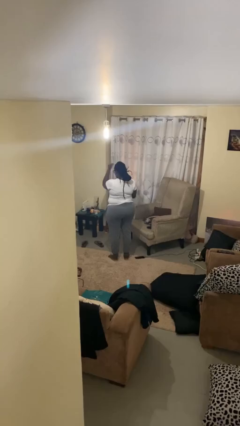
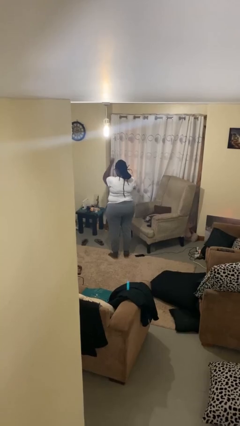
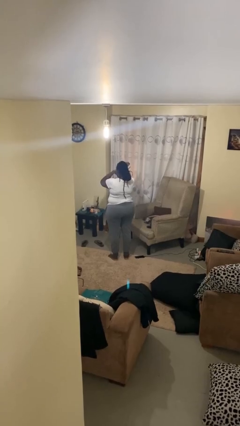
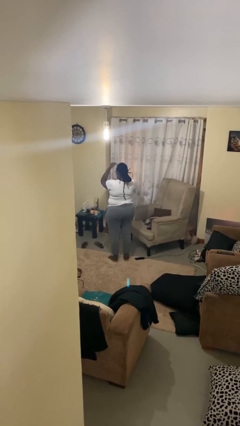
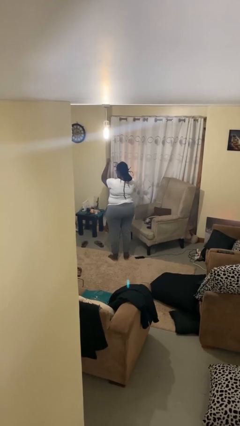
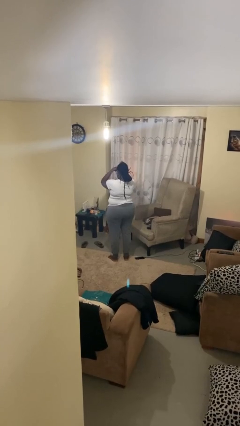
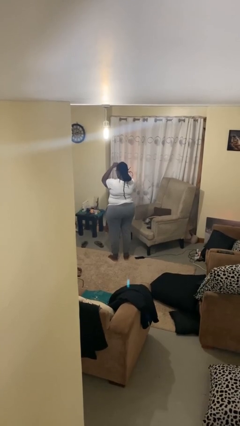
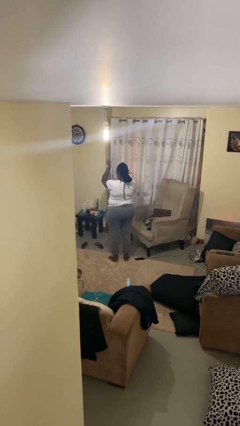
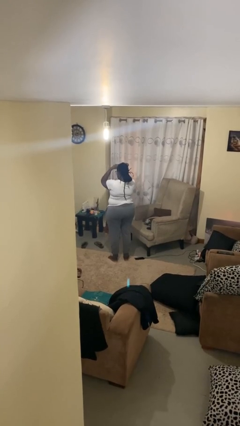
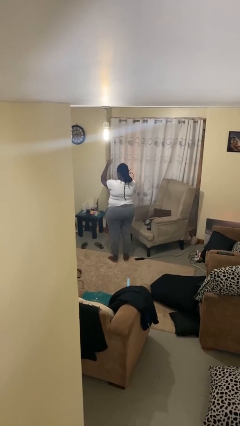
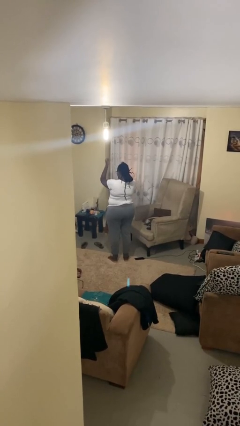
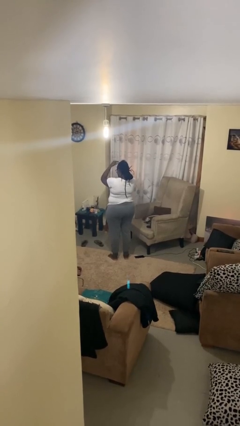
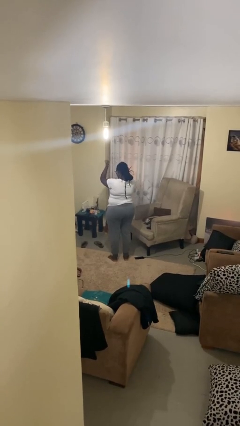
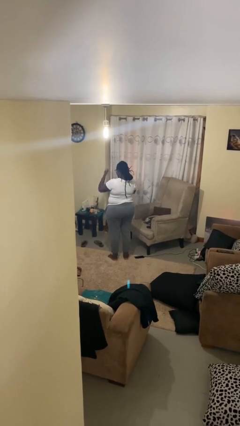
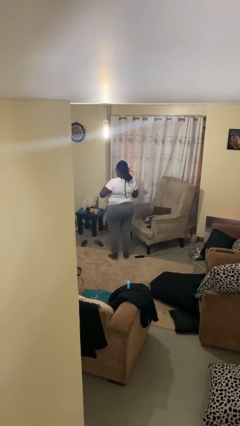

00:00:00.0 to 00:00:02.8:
person snaps fingers

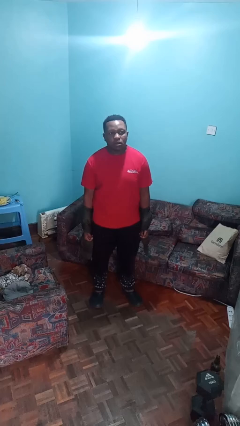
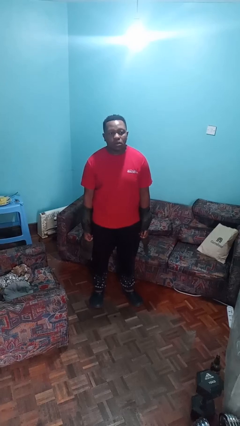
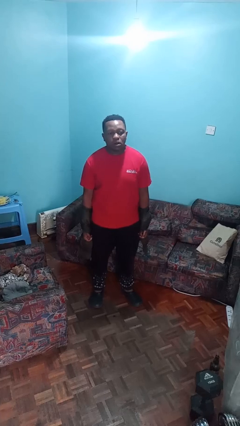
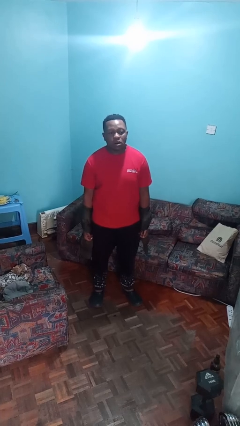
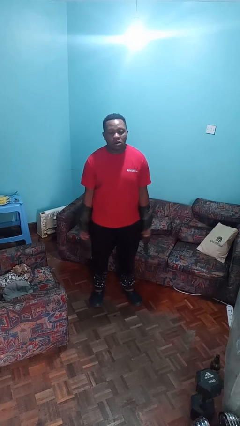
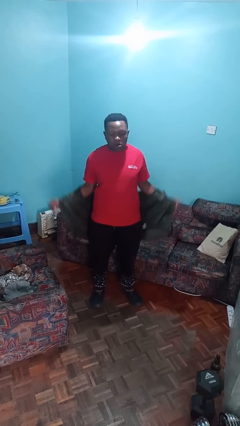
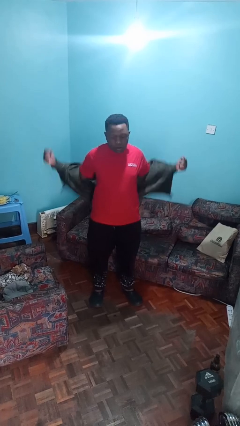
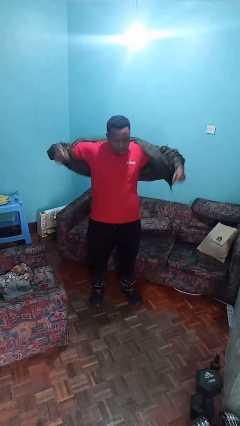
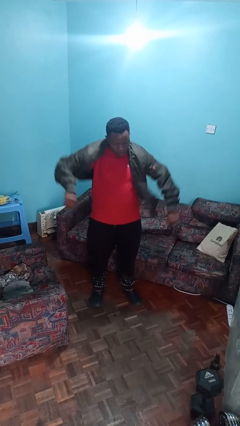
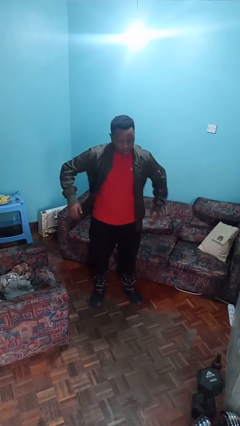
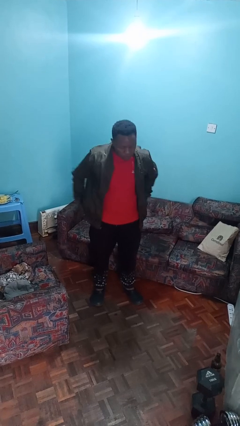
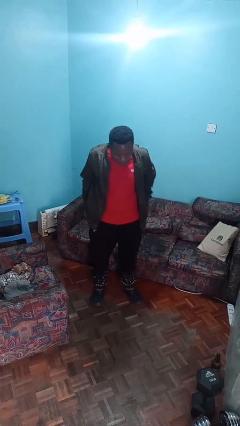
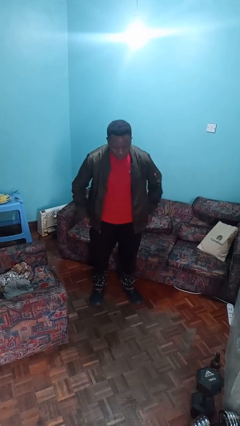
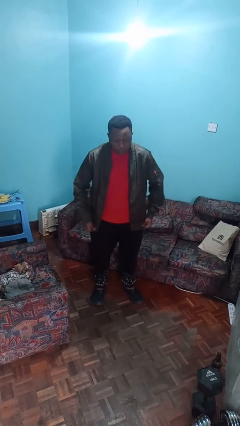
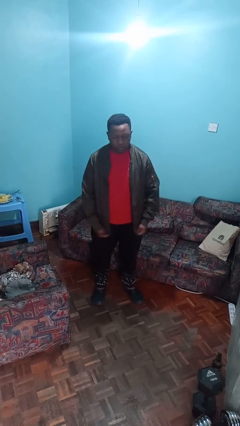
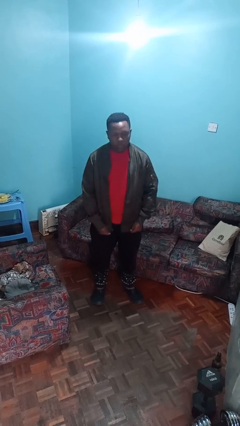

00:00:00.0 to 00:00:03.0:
person puts on jacket

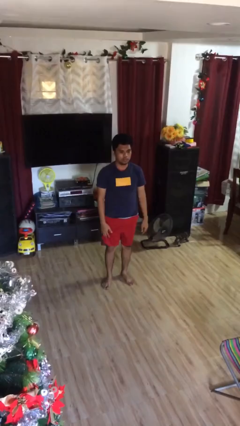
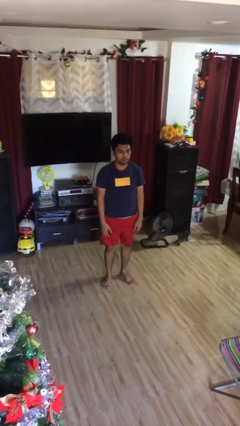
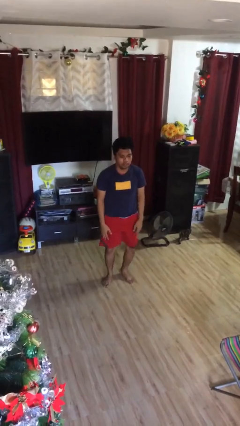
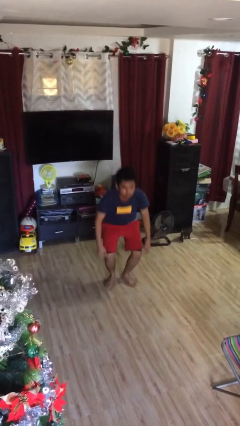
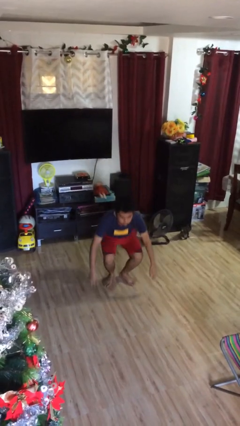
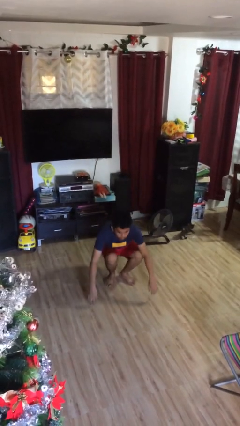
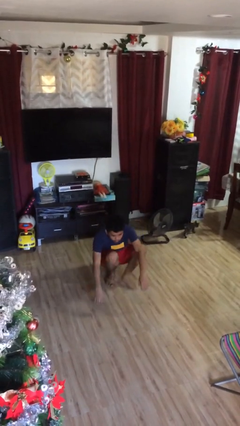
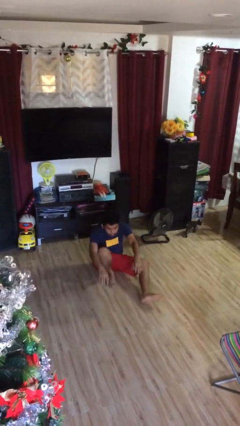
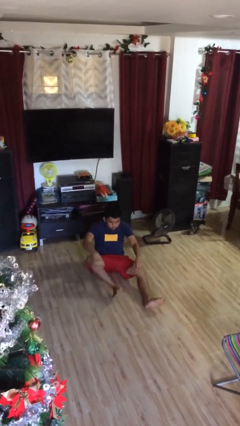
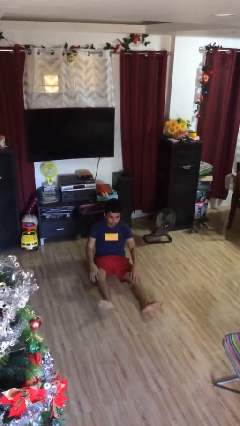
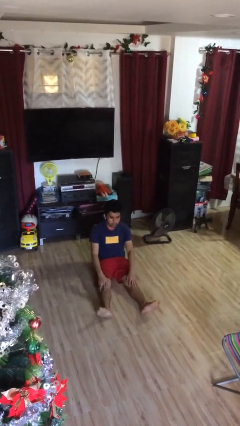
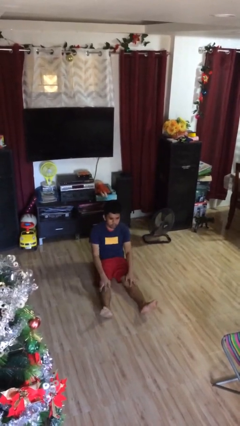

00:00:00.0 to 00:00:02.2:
person sits down

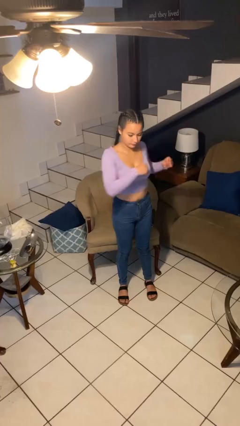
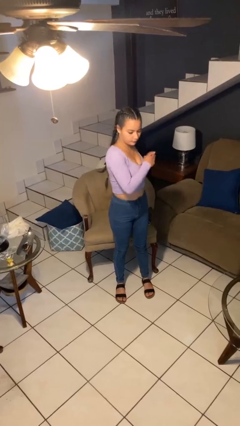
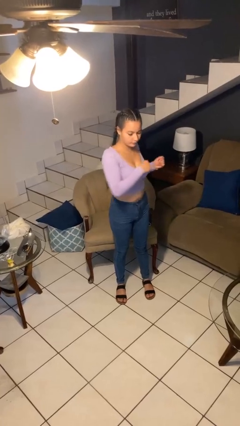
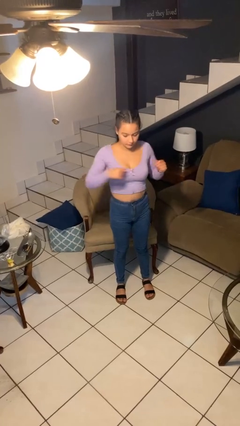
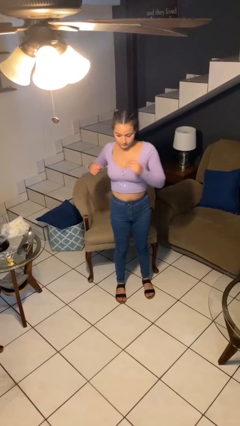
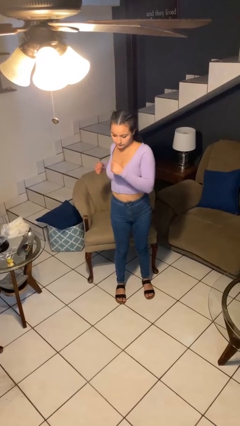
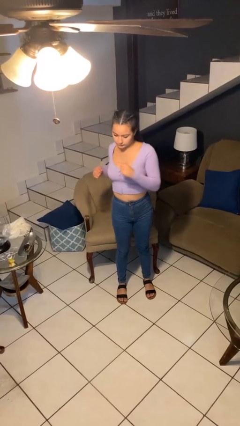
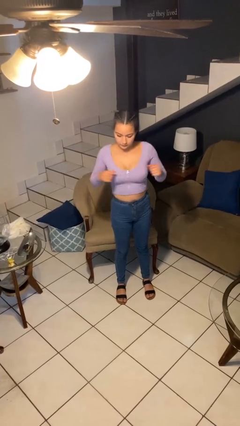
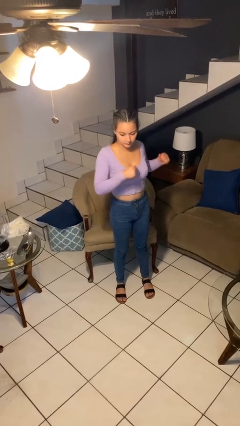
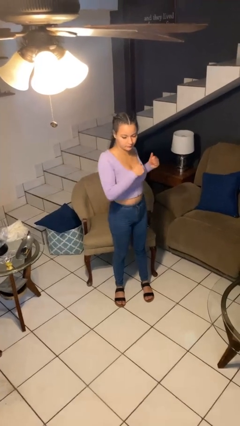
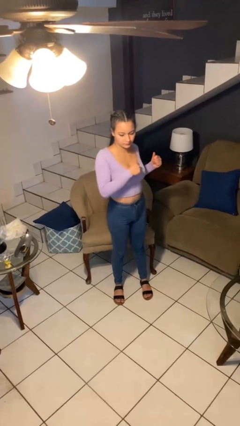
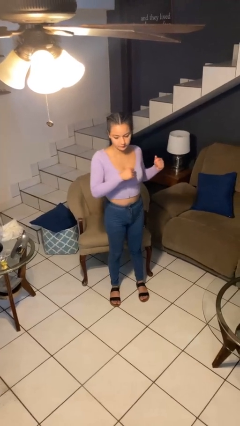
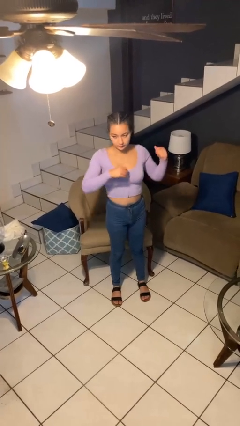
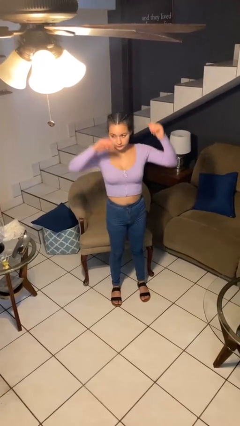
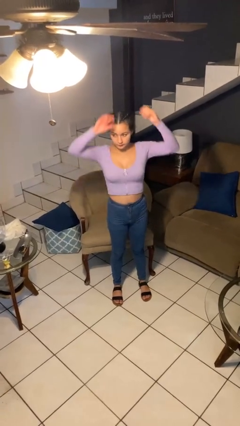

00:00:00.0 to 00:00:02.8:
person stretches arms to side

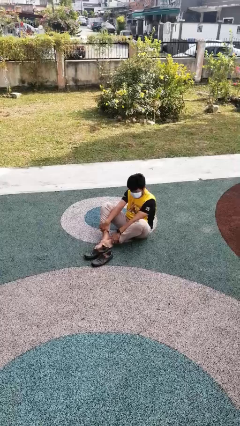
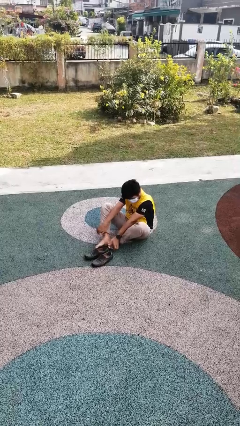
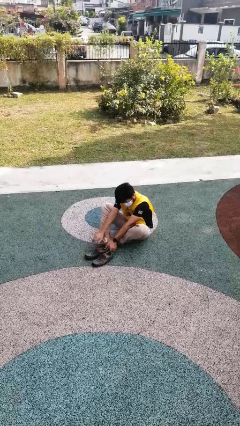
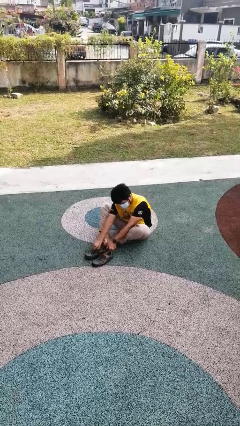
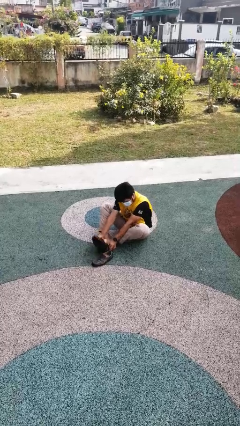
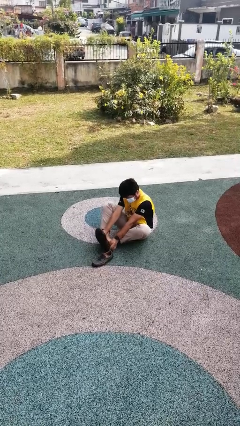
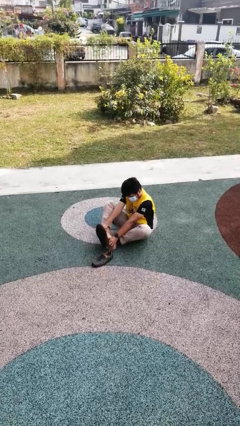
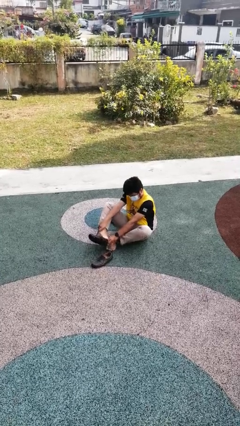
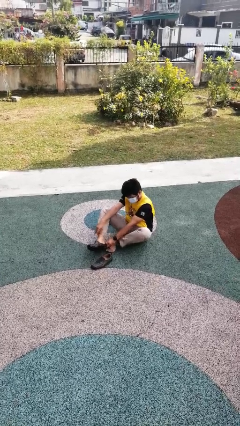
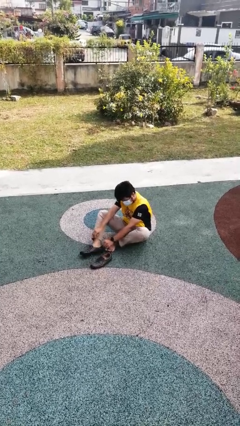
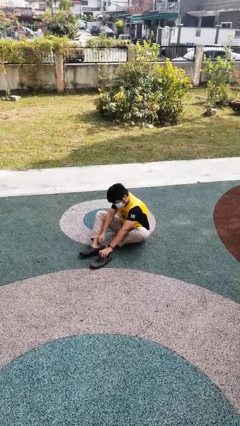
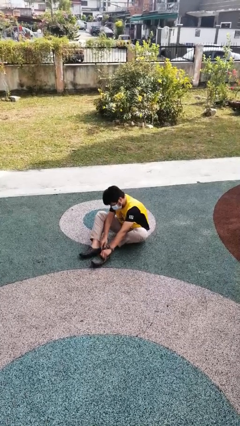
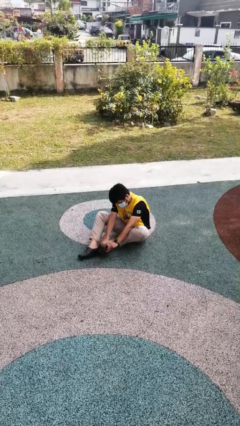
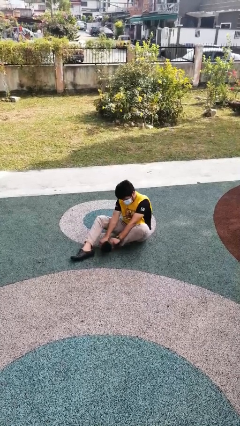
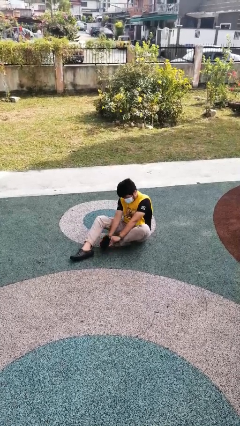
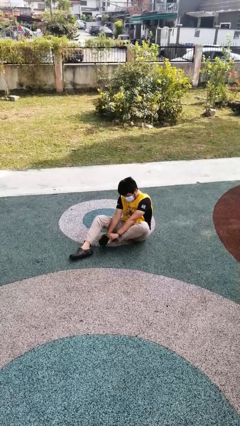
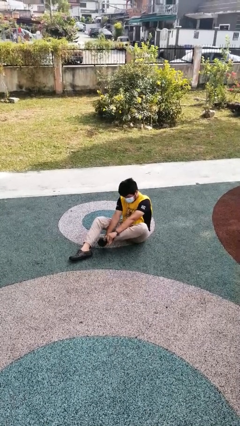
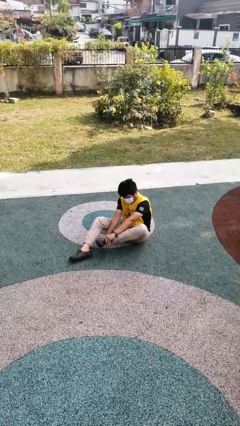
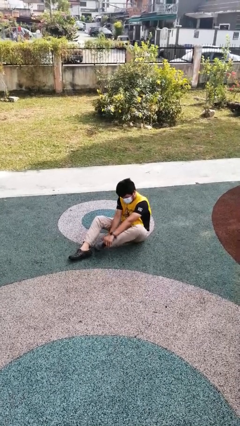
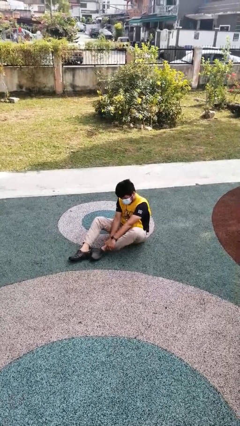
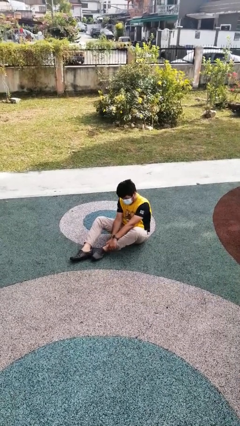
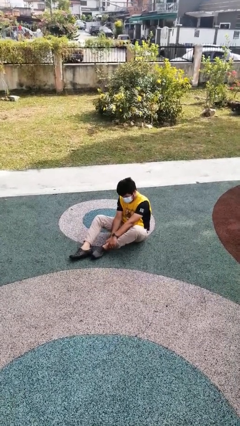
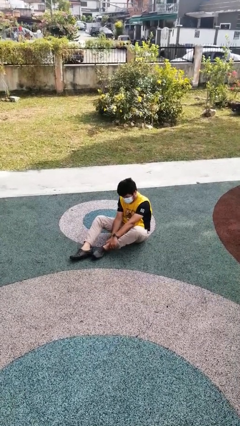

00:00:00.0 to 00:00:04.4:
person puts on shoes

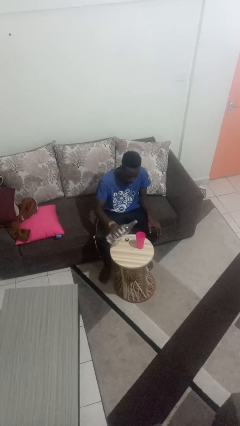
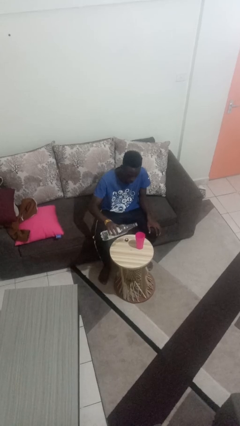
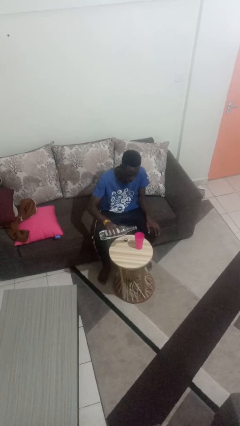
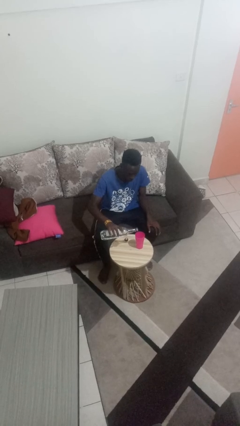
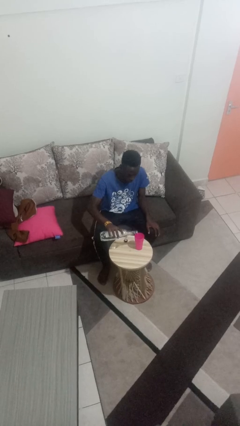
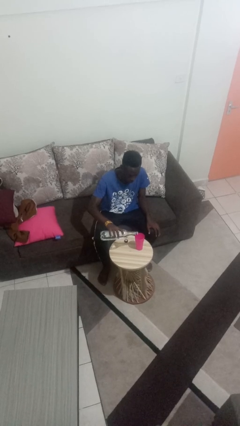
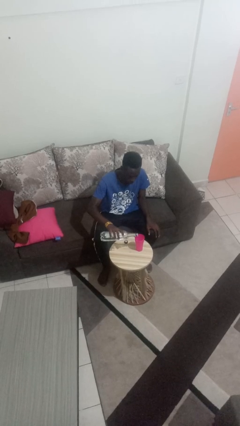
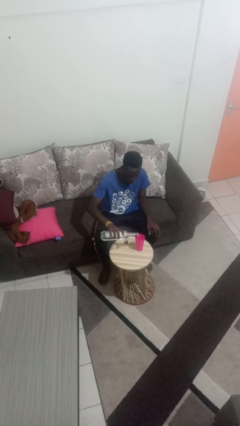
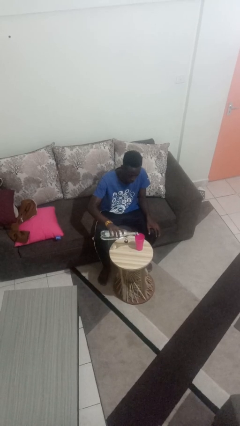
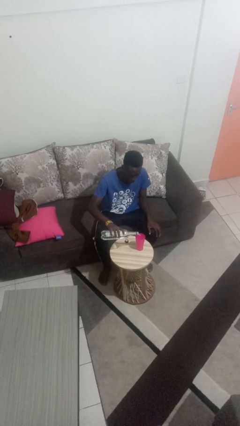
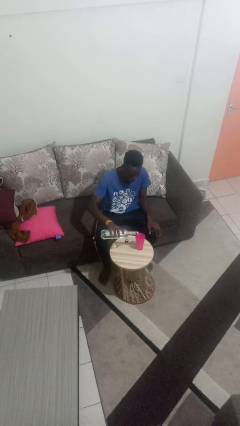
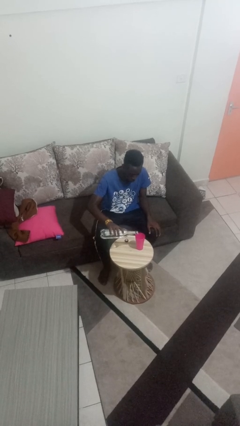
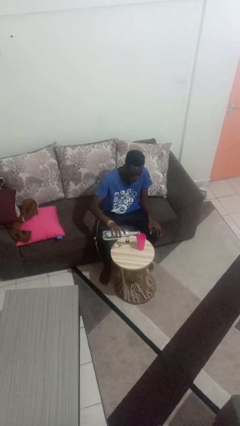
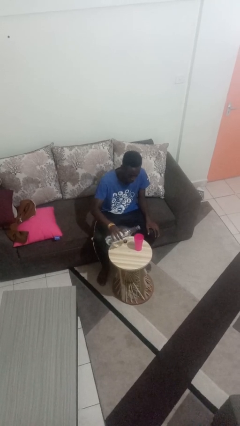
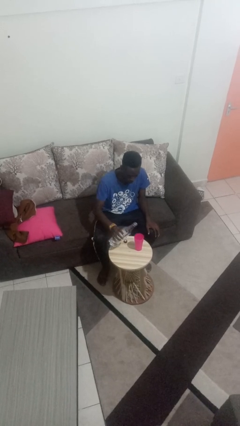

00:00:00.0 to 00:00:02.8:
person pours liquid into cup
